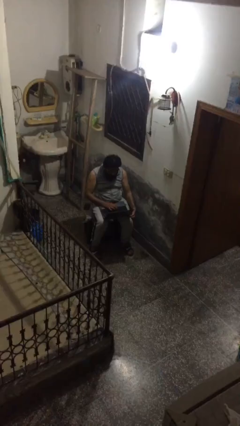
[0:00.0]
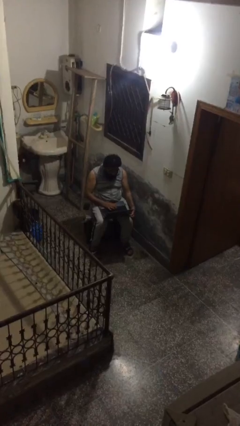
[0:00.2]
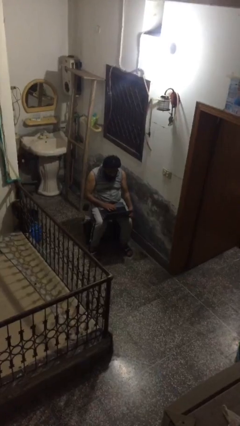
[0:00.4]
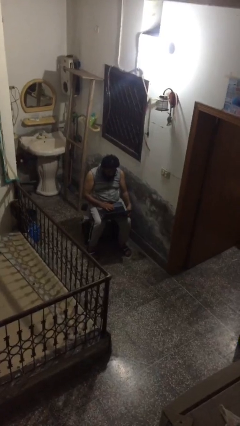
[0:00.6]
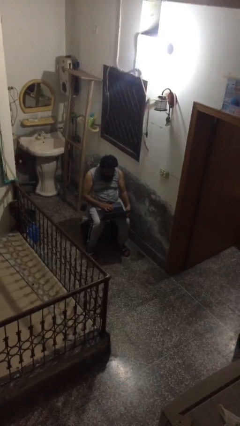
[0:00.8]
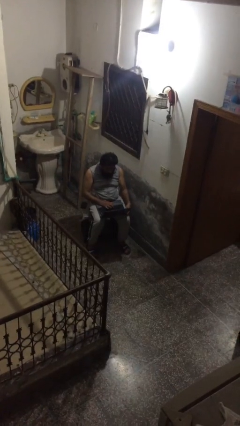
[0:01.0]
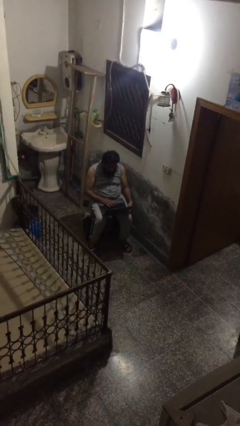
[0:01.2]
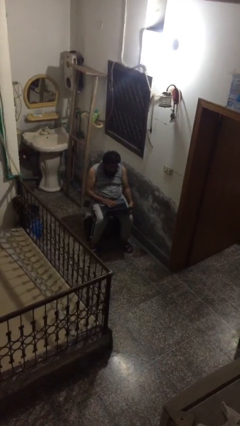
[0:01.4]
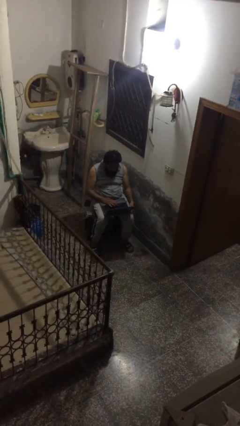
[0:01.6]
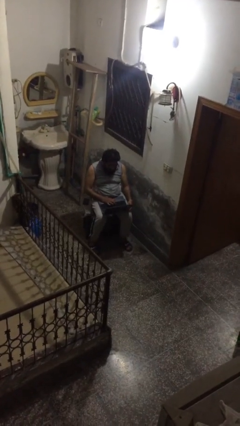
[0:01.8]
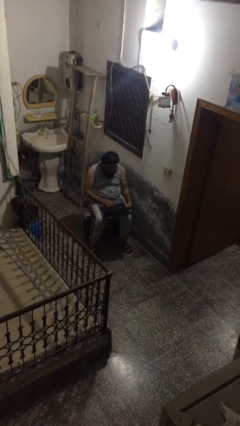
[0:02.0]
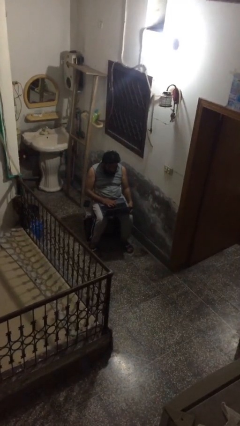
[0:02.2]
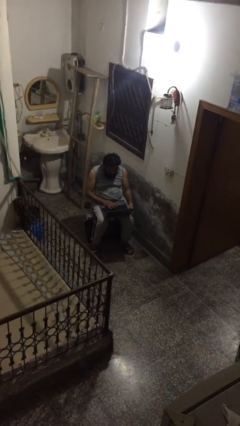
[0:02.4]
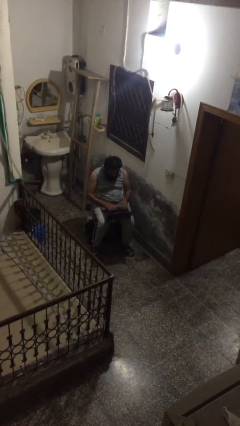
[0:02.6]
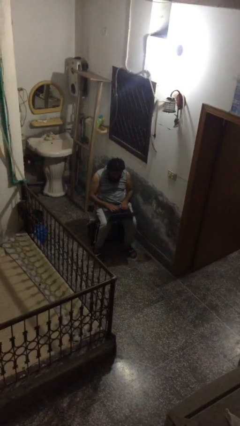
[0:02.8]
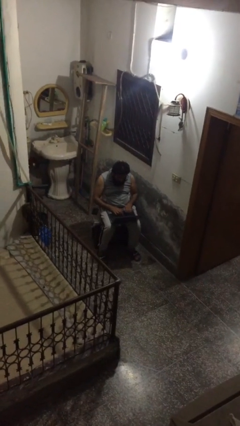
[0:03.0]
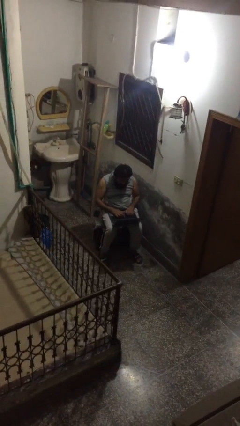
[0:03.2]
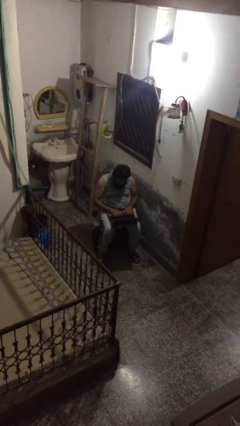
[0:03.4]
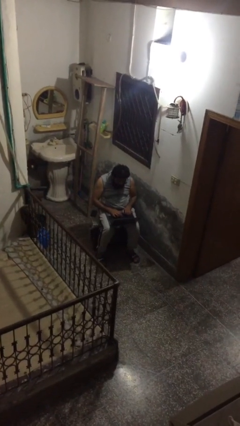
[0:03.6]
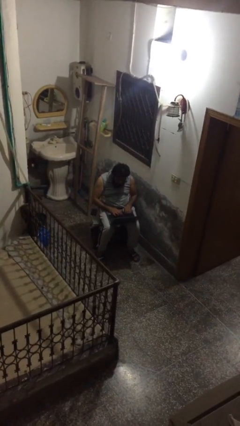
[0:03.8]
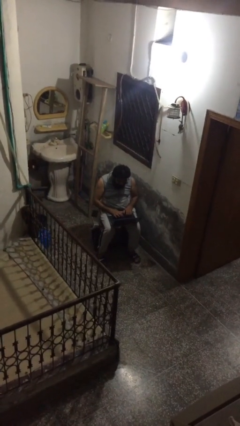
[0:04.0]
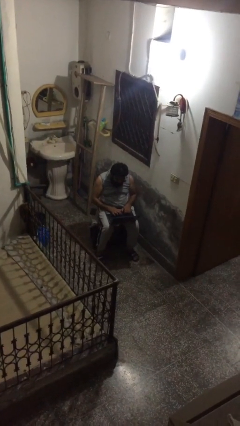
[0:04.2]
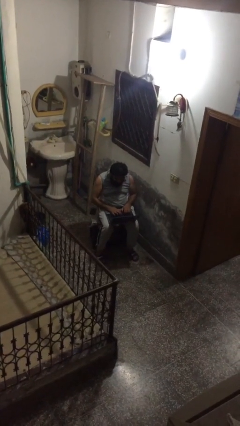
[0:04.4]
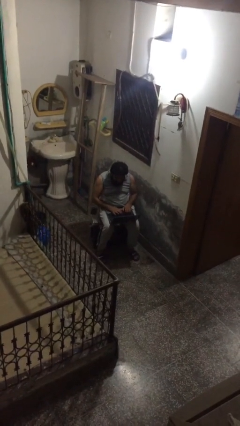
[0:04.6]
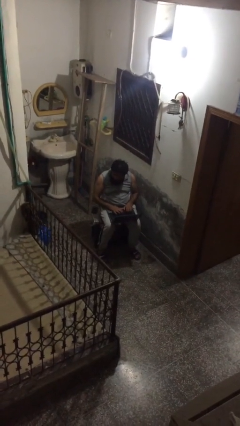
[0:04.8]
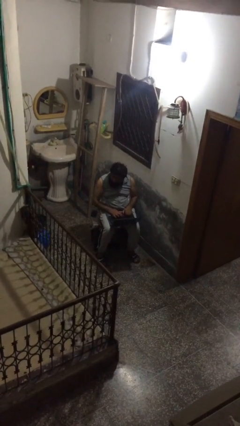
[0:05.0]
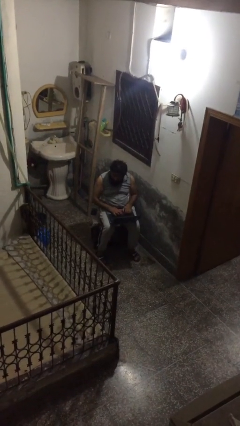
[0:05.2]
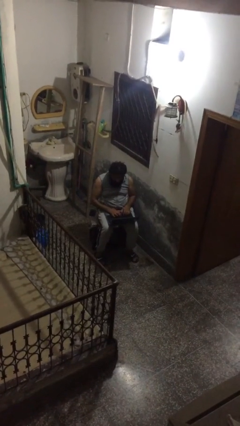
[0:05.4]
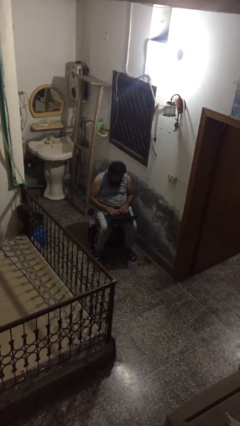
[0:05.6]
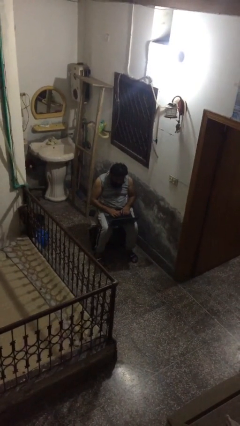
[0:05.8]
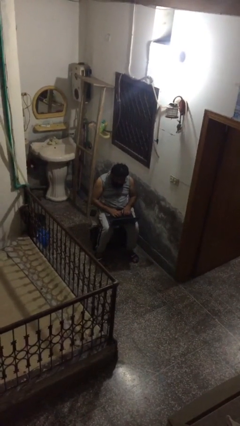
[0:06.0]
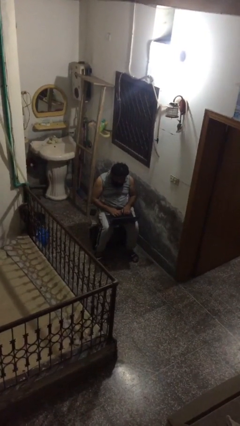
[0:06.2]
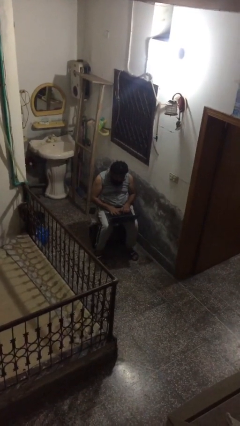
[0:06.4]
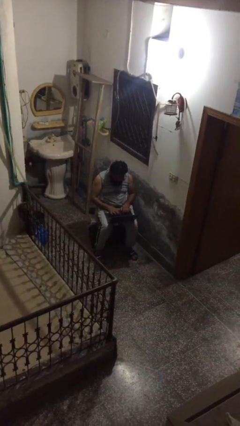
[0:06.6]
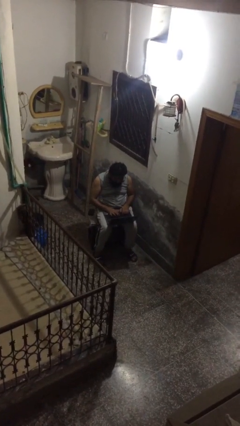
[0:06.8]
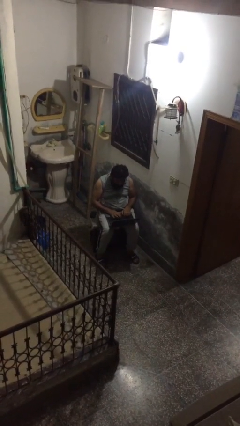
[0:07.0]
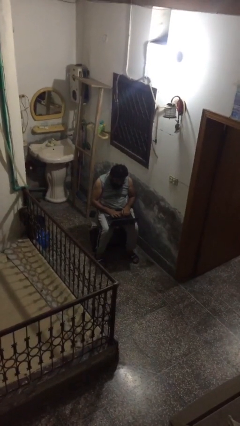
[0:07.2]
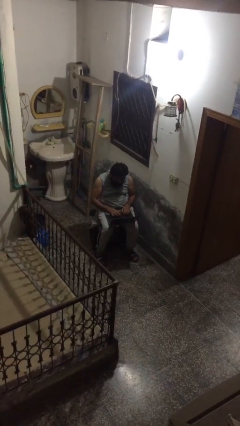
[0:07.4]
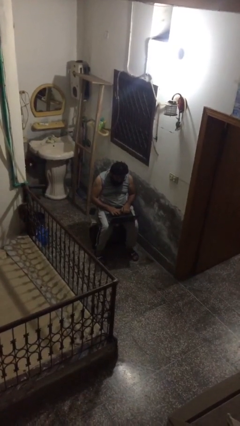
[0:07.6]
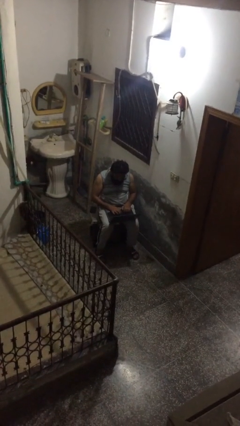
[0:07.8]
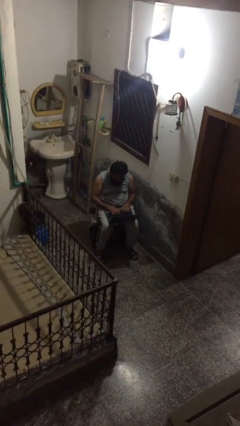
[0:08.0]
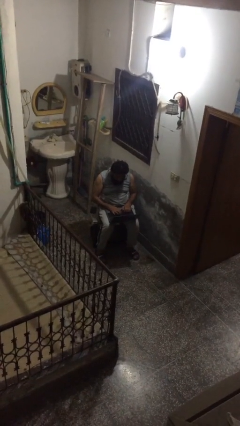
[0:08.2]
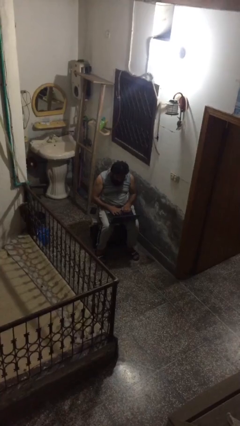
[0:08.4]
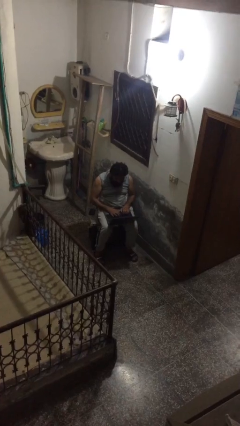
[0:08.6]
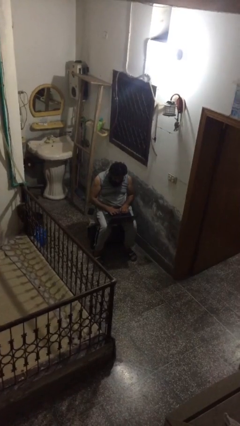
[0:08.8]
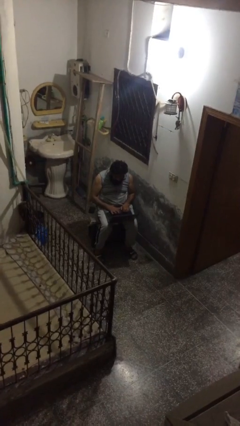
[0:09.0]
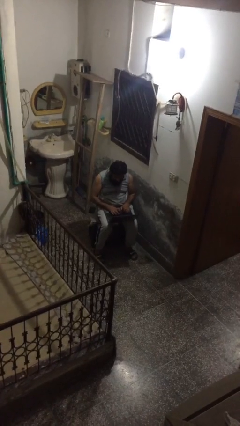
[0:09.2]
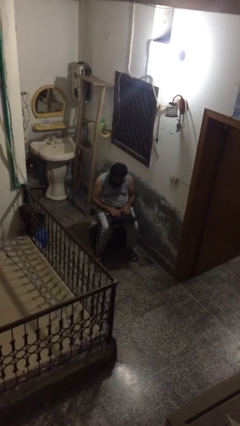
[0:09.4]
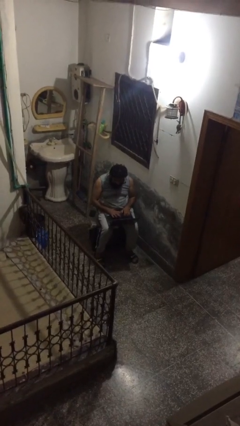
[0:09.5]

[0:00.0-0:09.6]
person interacts with laptop

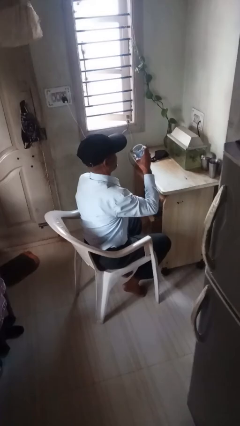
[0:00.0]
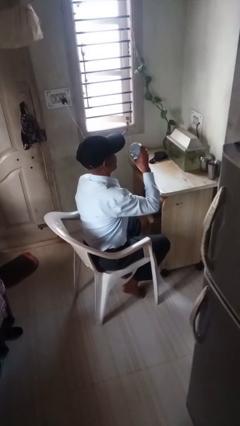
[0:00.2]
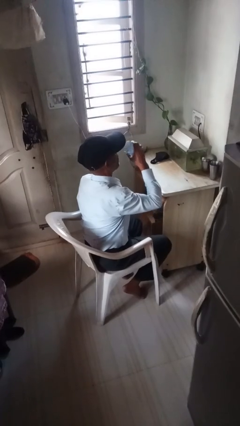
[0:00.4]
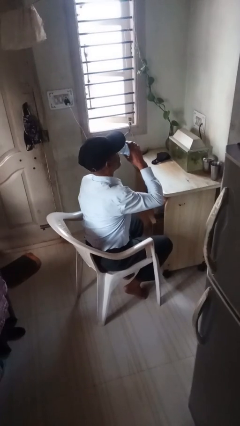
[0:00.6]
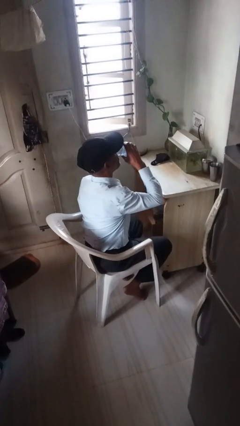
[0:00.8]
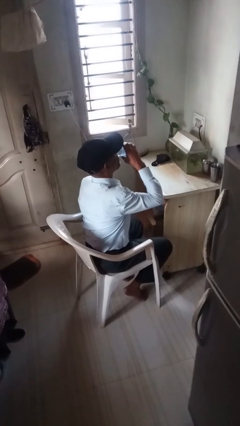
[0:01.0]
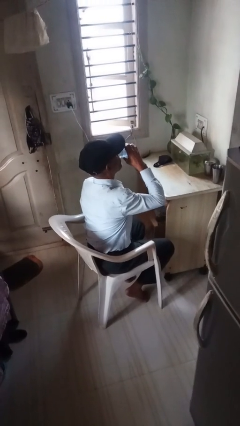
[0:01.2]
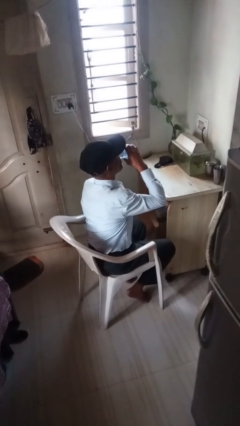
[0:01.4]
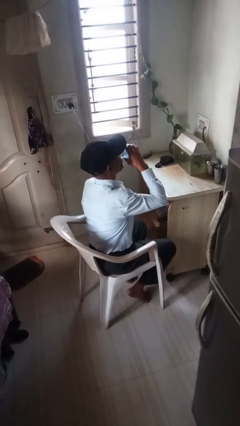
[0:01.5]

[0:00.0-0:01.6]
person drinks from shotglass

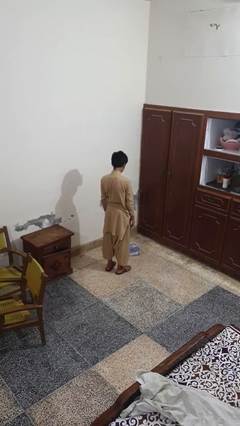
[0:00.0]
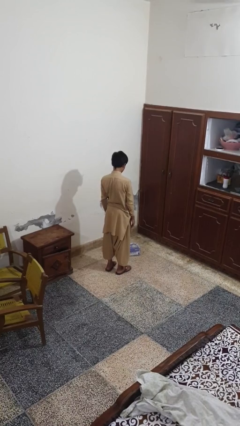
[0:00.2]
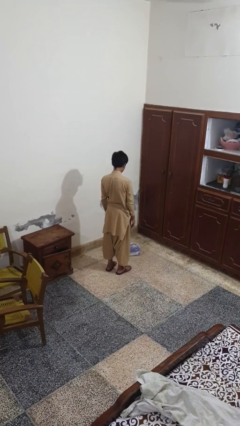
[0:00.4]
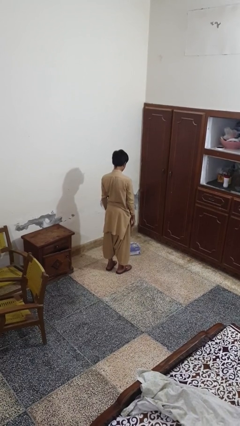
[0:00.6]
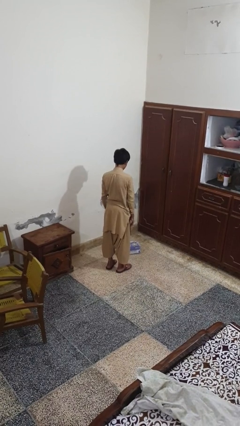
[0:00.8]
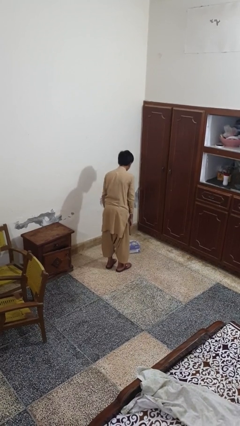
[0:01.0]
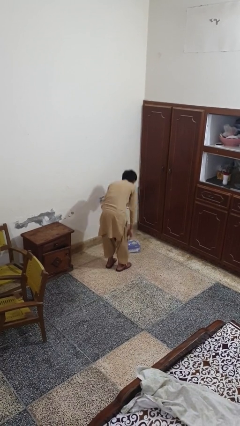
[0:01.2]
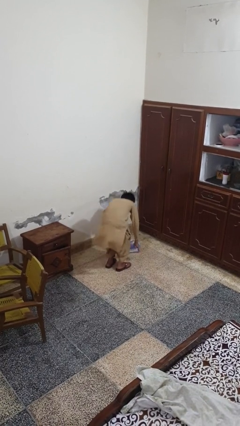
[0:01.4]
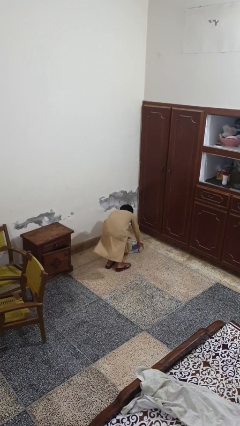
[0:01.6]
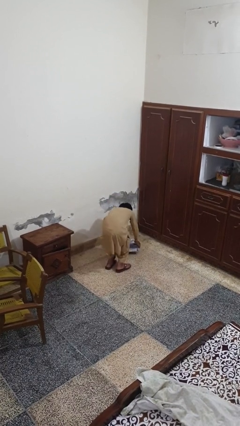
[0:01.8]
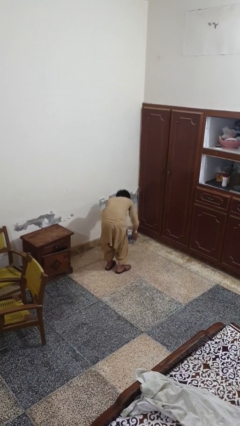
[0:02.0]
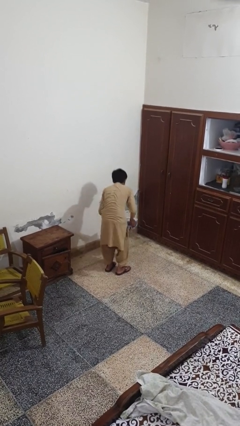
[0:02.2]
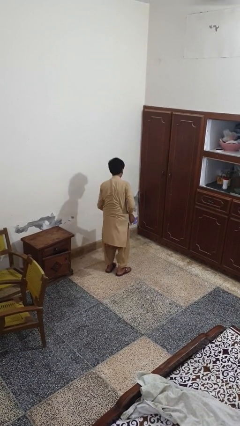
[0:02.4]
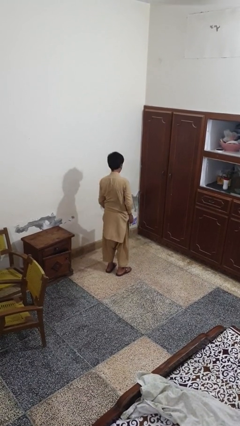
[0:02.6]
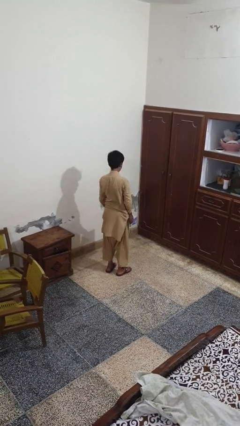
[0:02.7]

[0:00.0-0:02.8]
person picks up object from floor

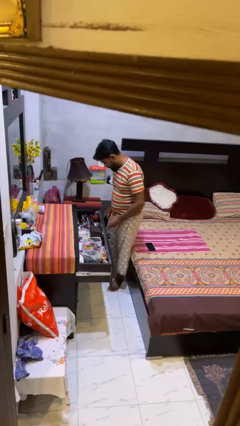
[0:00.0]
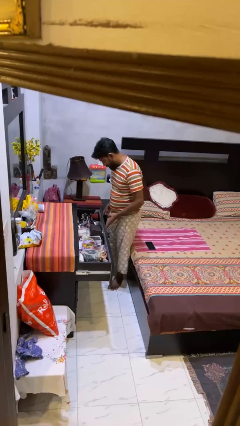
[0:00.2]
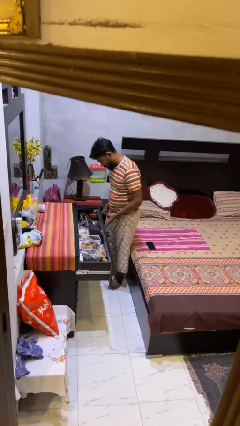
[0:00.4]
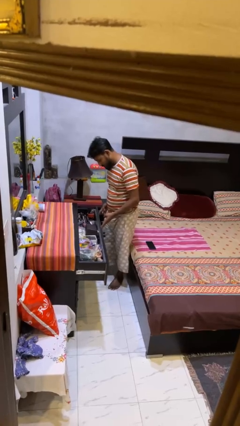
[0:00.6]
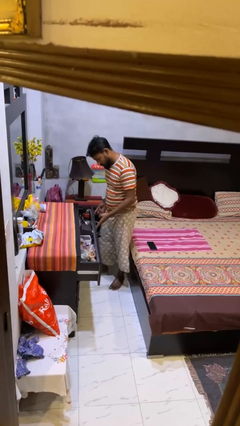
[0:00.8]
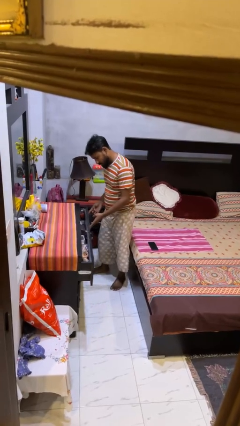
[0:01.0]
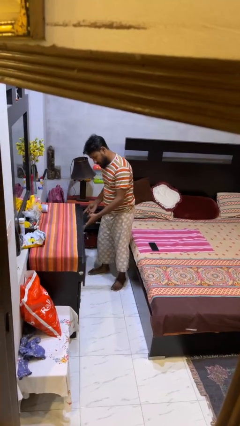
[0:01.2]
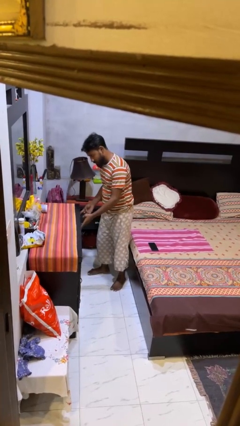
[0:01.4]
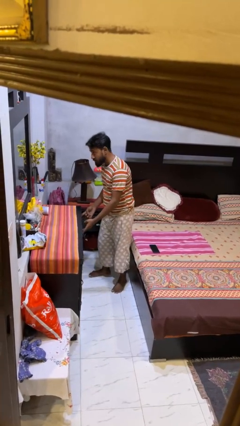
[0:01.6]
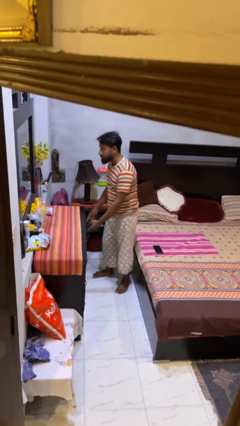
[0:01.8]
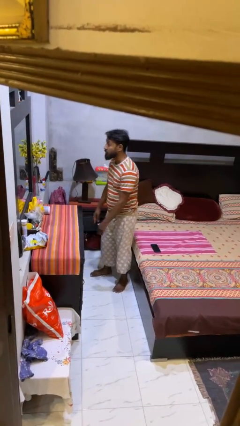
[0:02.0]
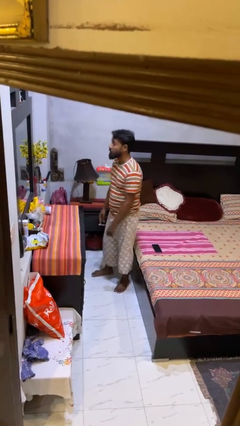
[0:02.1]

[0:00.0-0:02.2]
person closes dresser drawer

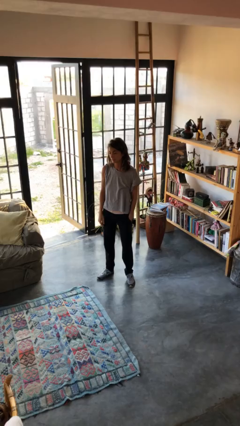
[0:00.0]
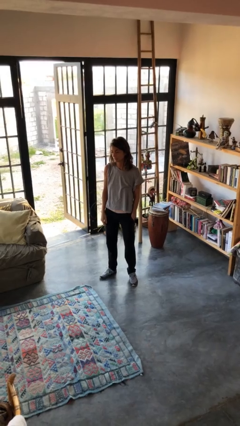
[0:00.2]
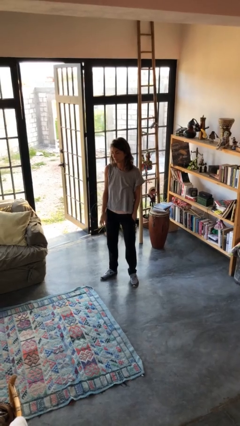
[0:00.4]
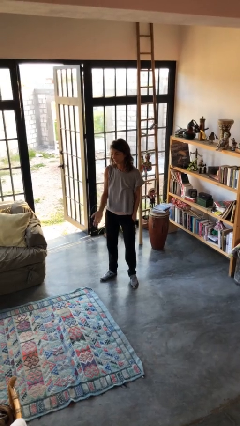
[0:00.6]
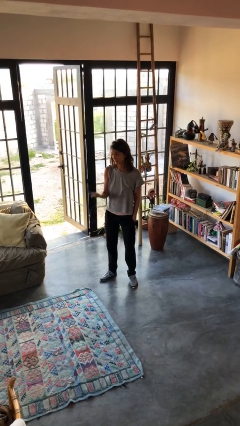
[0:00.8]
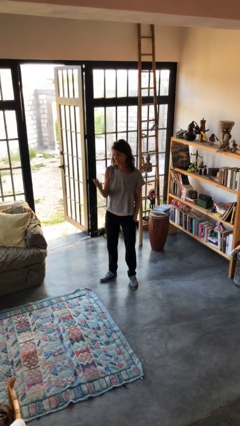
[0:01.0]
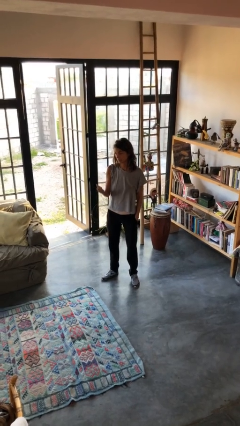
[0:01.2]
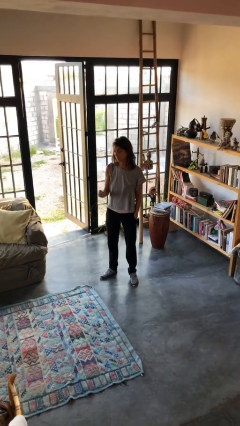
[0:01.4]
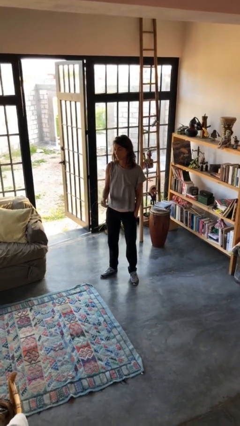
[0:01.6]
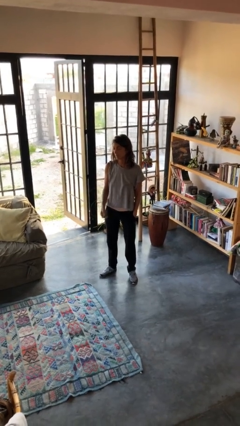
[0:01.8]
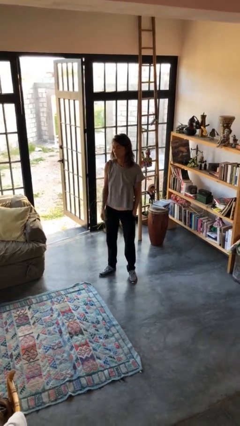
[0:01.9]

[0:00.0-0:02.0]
person gestures swipe up
